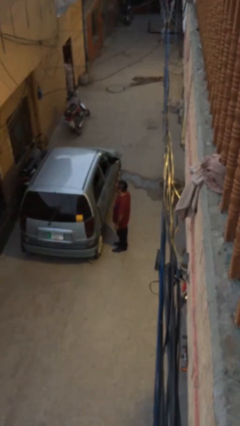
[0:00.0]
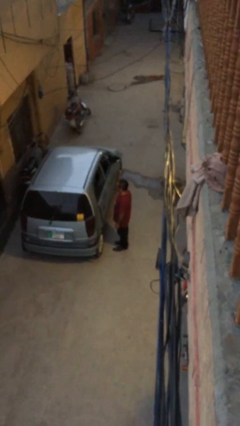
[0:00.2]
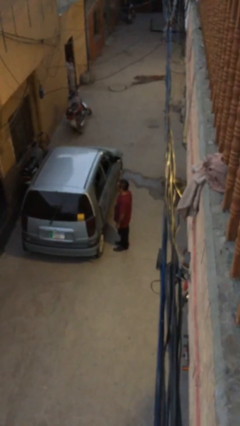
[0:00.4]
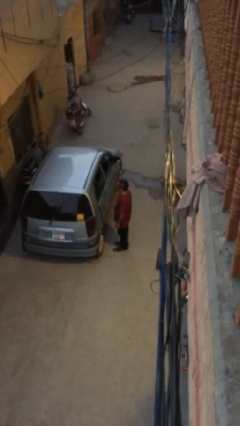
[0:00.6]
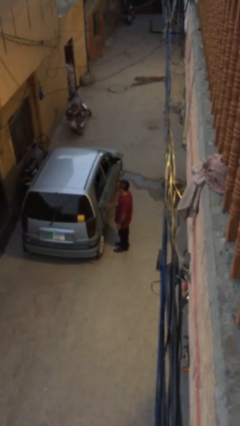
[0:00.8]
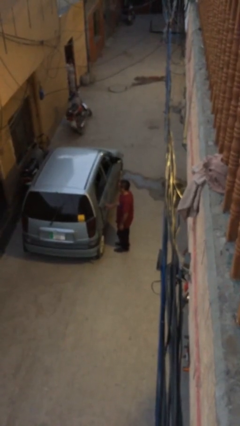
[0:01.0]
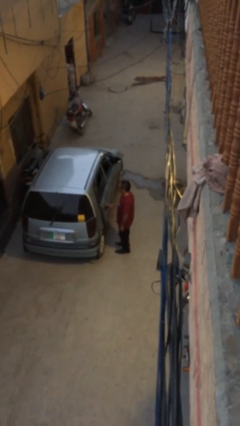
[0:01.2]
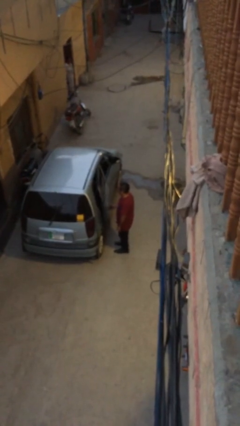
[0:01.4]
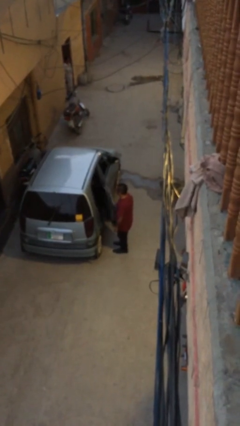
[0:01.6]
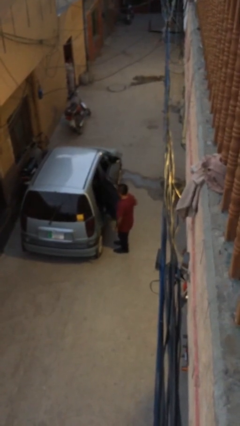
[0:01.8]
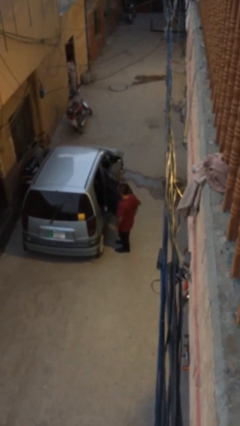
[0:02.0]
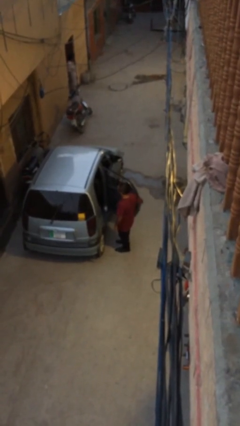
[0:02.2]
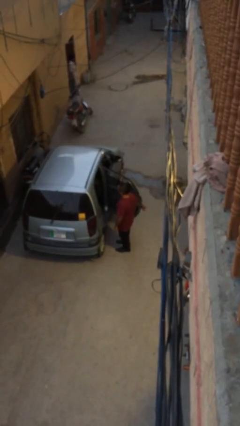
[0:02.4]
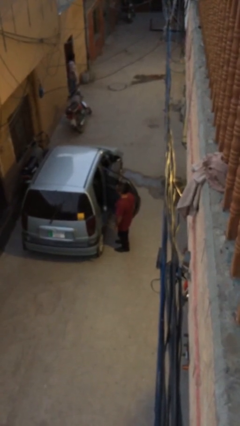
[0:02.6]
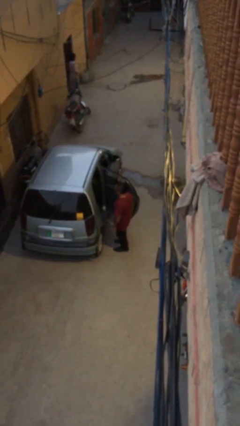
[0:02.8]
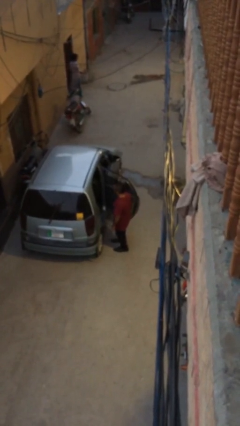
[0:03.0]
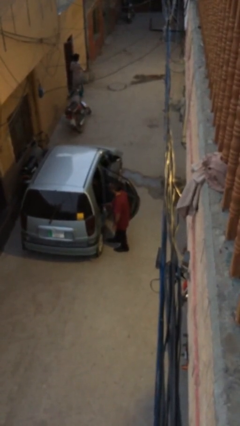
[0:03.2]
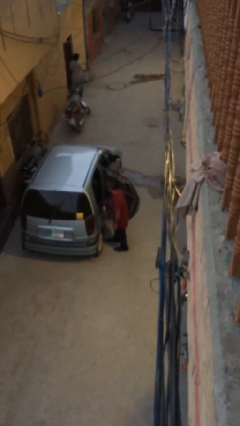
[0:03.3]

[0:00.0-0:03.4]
person opens car door

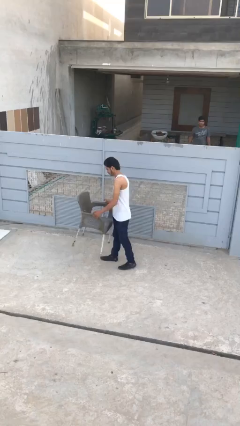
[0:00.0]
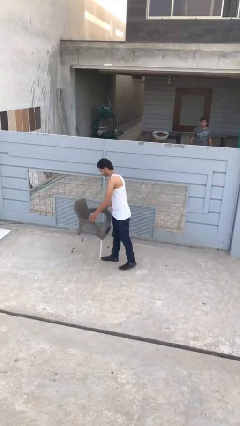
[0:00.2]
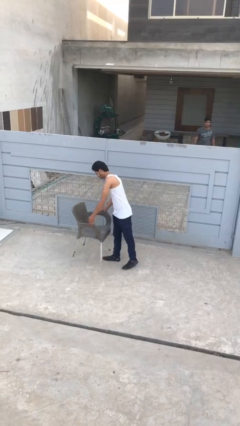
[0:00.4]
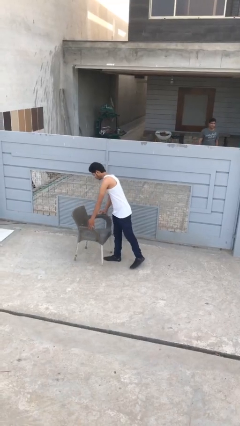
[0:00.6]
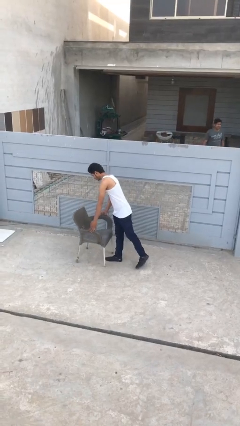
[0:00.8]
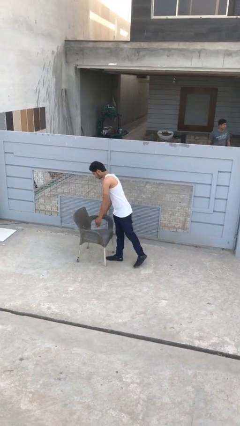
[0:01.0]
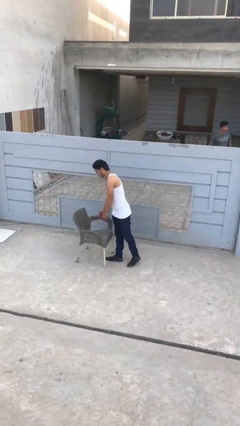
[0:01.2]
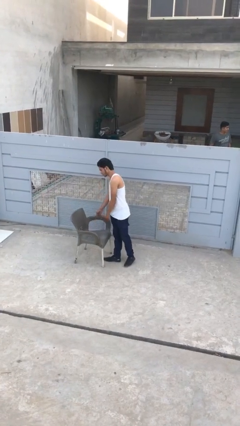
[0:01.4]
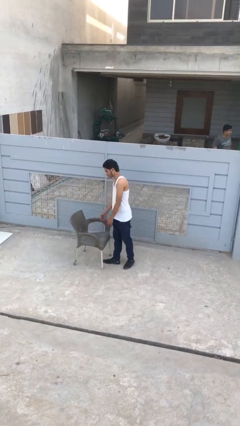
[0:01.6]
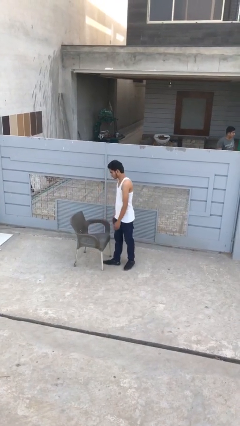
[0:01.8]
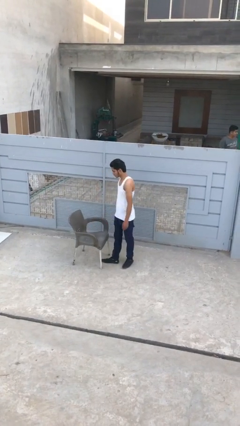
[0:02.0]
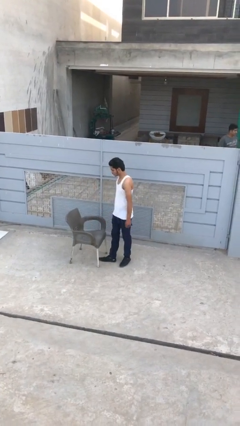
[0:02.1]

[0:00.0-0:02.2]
person puts down object on floor

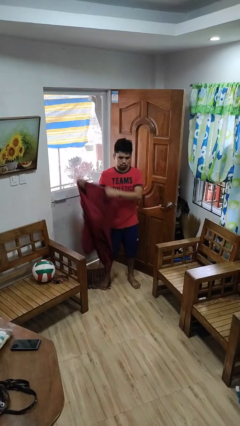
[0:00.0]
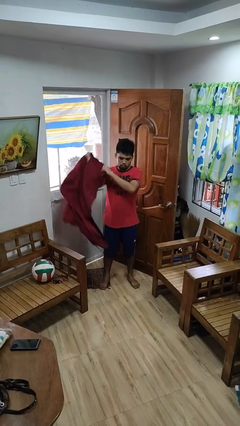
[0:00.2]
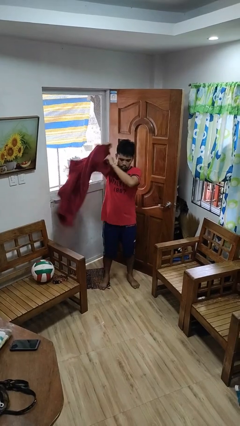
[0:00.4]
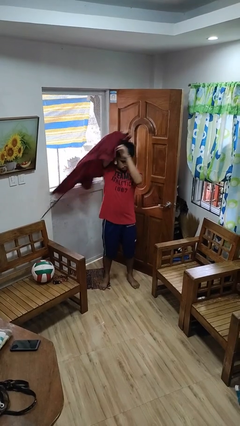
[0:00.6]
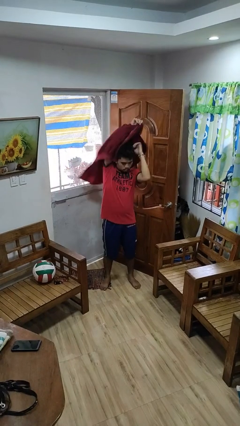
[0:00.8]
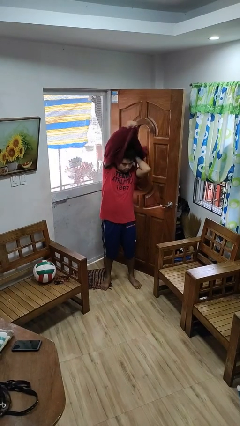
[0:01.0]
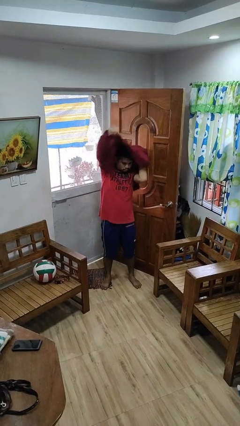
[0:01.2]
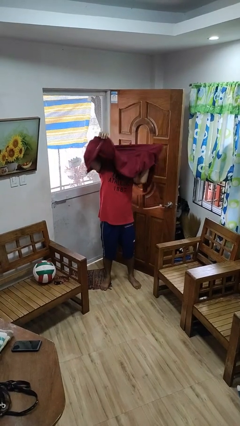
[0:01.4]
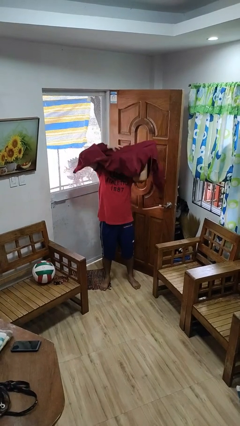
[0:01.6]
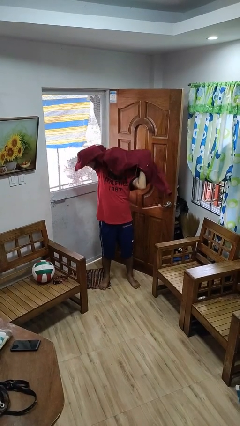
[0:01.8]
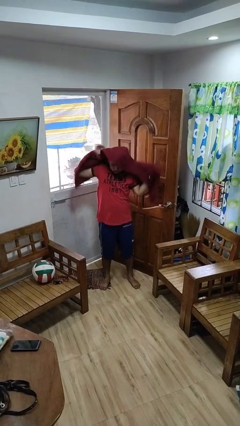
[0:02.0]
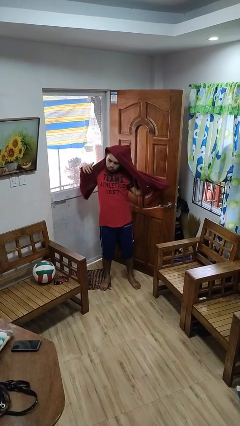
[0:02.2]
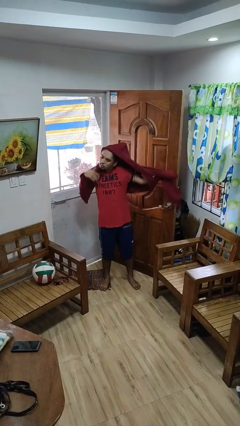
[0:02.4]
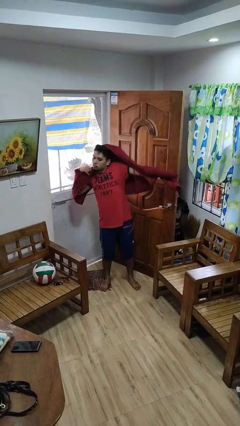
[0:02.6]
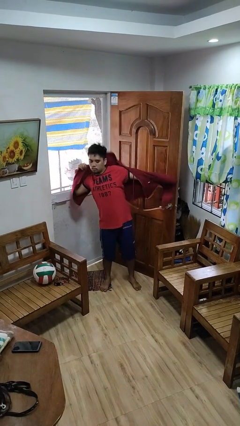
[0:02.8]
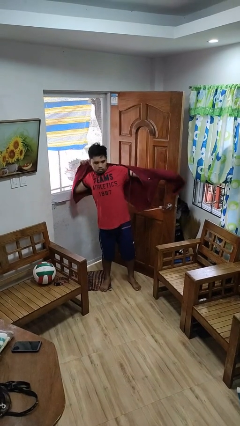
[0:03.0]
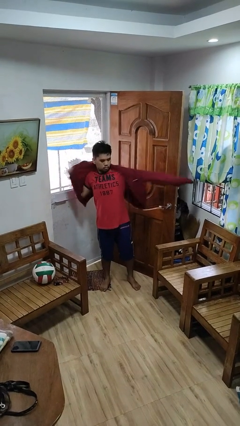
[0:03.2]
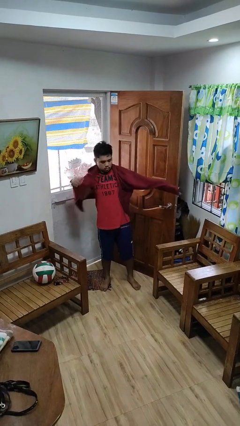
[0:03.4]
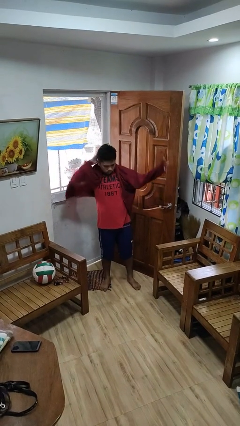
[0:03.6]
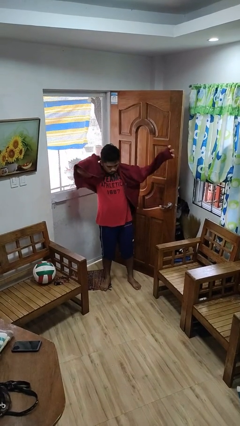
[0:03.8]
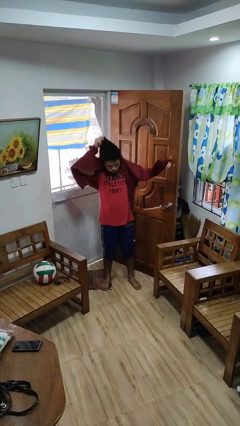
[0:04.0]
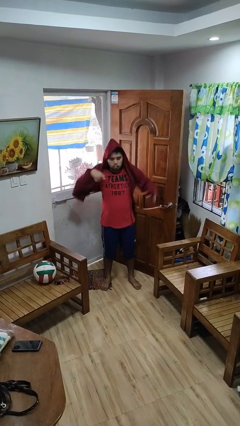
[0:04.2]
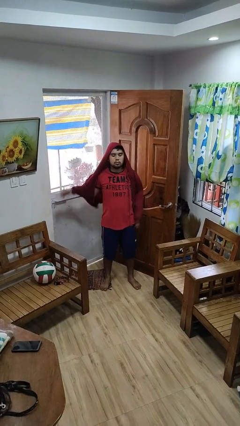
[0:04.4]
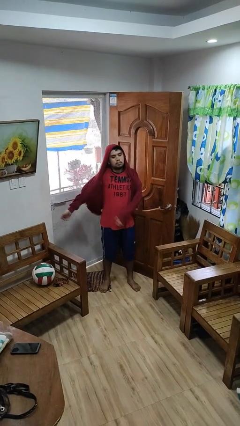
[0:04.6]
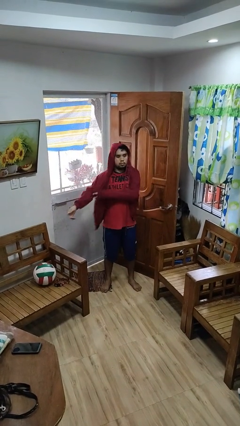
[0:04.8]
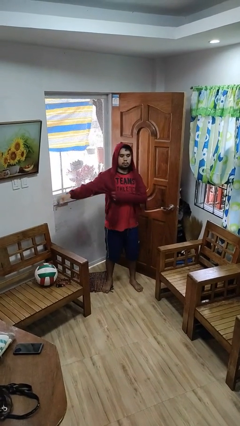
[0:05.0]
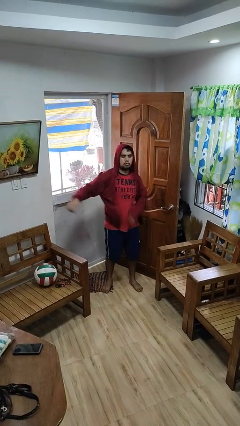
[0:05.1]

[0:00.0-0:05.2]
person puts on hoodie

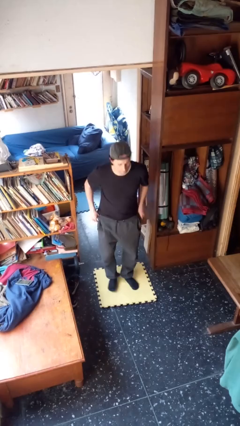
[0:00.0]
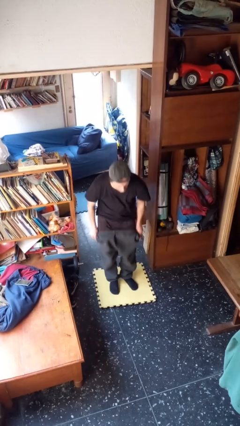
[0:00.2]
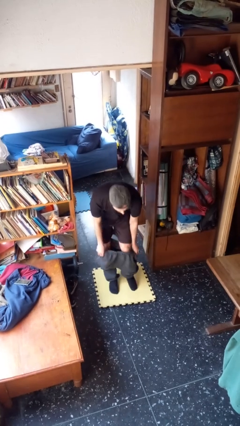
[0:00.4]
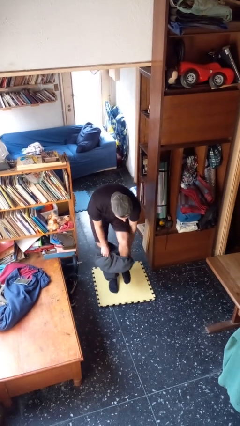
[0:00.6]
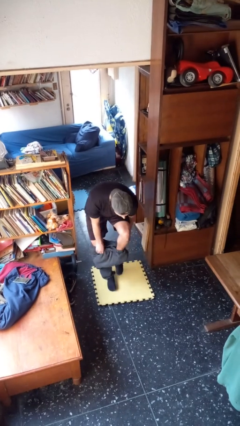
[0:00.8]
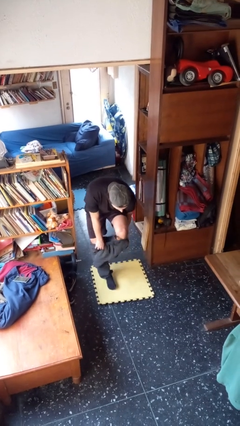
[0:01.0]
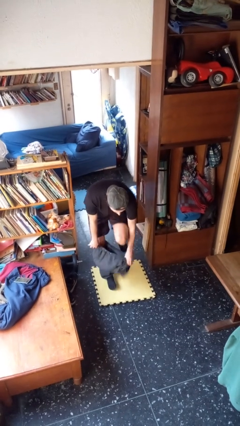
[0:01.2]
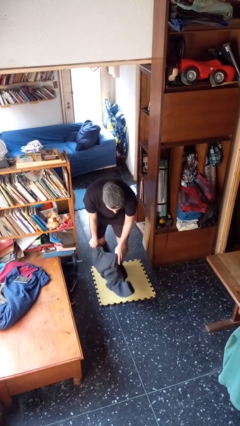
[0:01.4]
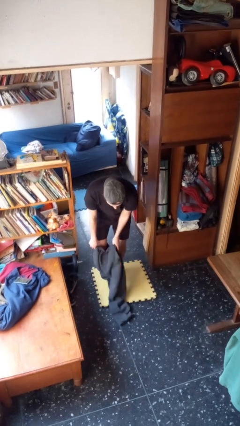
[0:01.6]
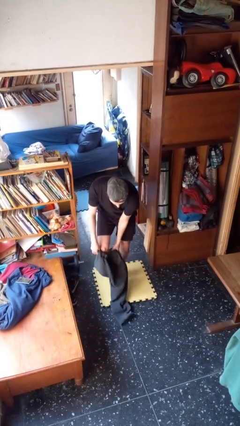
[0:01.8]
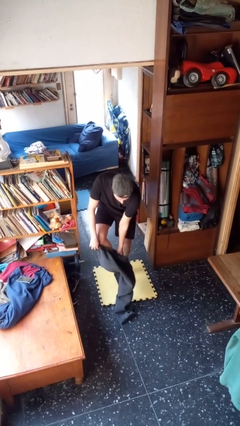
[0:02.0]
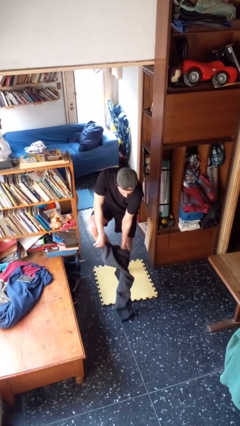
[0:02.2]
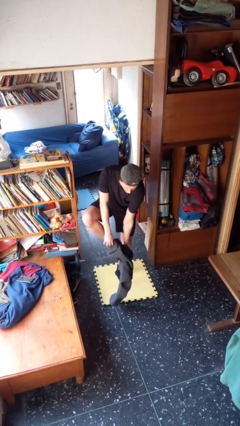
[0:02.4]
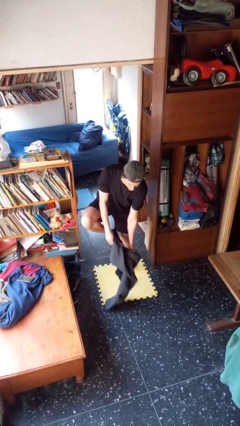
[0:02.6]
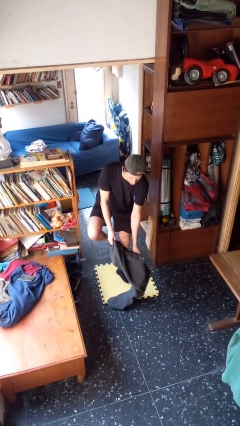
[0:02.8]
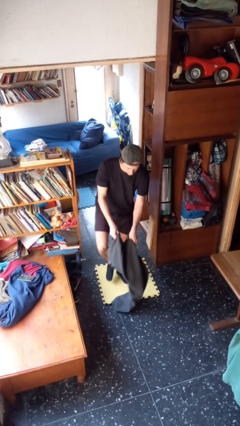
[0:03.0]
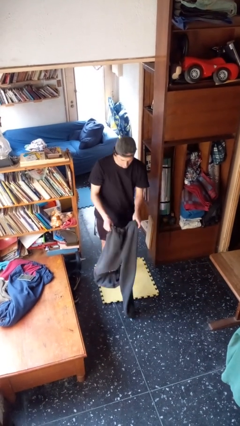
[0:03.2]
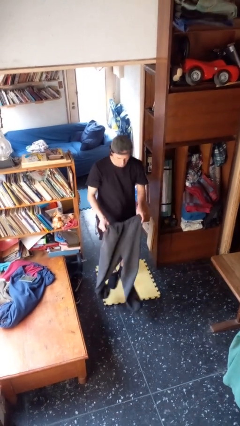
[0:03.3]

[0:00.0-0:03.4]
person takes off pants

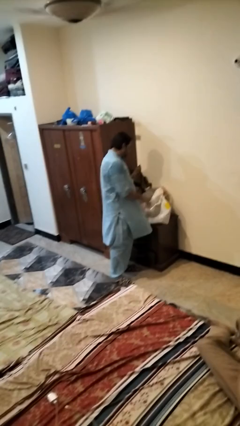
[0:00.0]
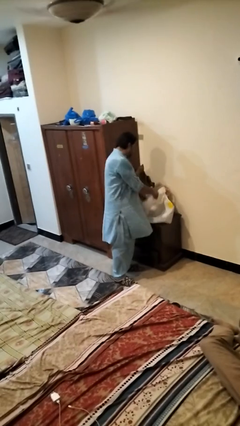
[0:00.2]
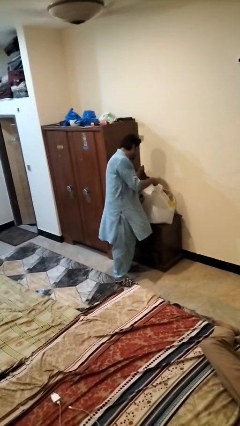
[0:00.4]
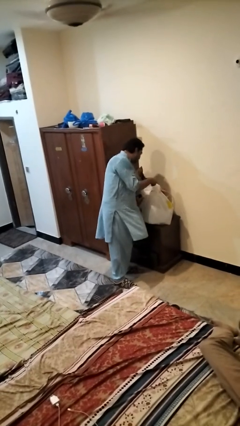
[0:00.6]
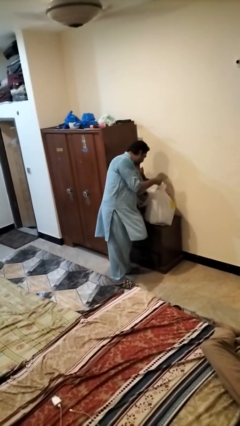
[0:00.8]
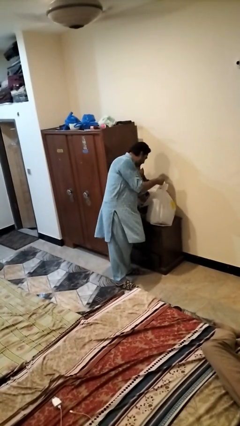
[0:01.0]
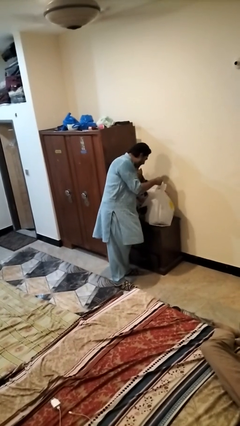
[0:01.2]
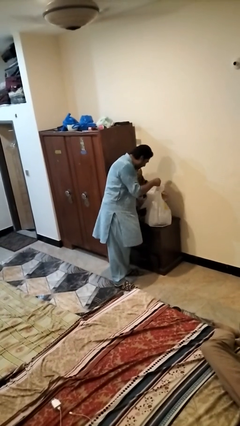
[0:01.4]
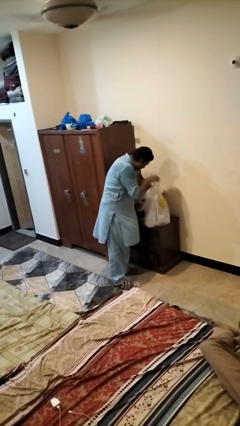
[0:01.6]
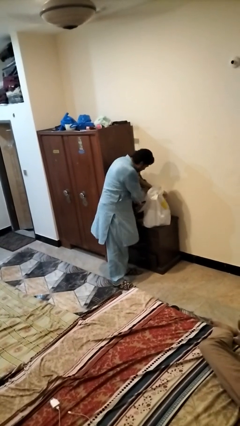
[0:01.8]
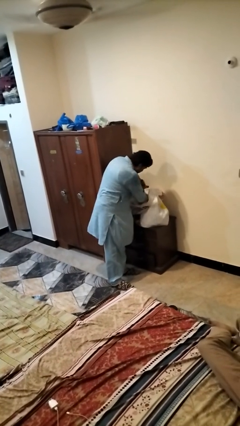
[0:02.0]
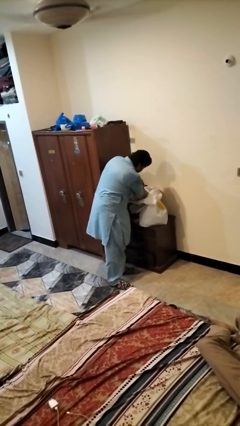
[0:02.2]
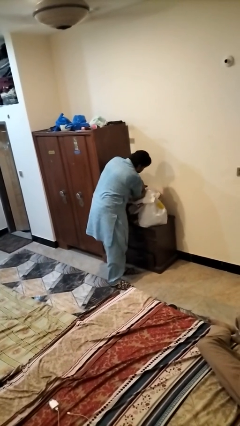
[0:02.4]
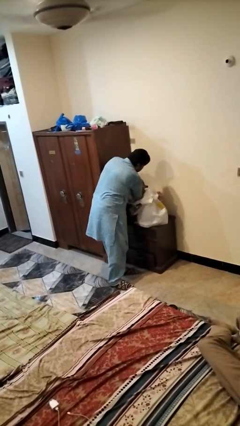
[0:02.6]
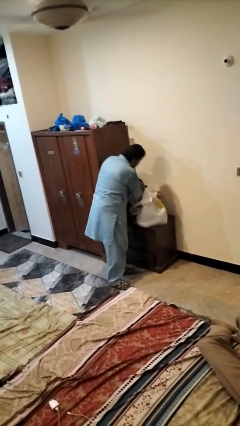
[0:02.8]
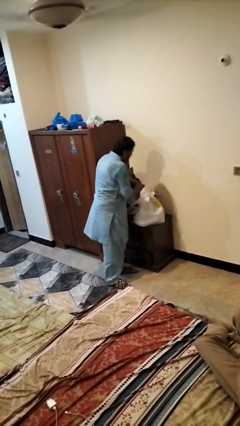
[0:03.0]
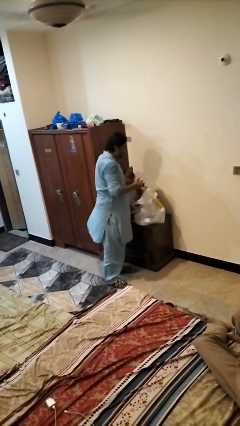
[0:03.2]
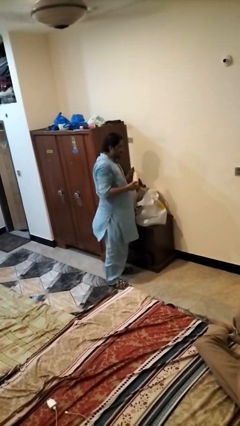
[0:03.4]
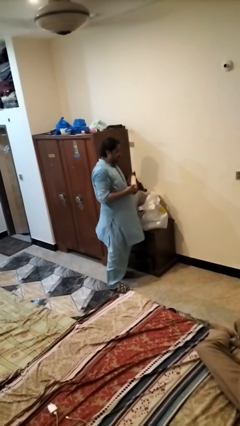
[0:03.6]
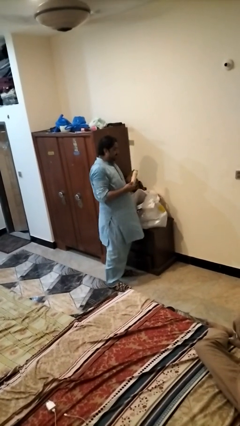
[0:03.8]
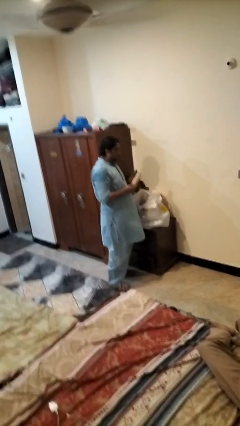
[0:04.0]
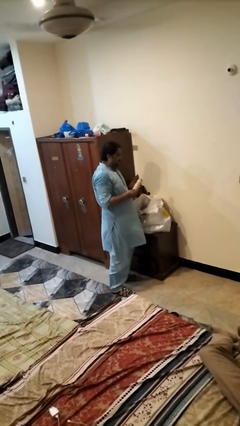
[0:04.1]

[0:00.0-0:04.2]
person takes object from bag
